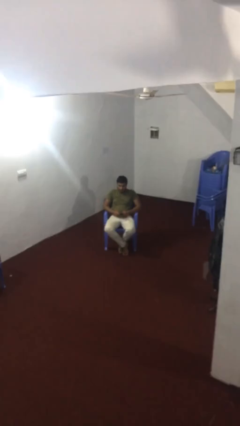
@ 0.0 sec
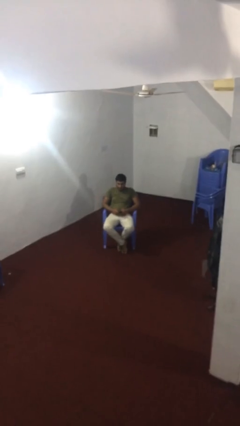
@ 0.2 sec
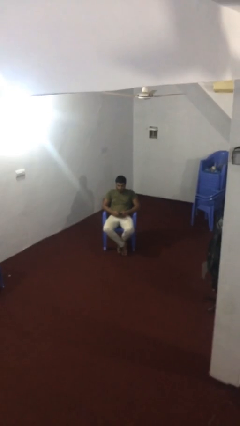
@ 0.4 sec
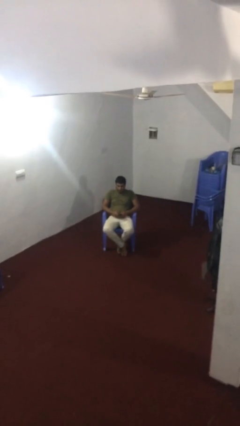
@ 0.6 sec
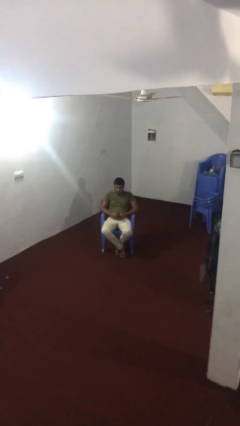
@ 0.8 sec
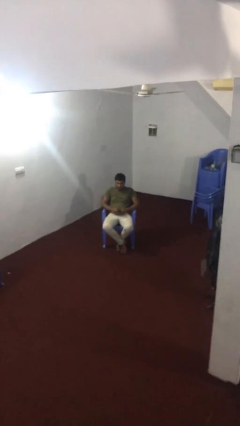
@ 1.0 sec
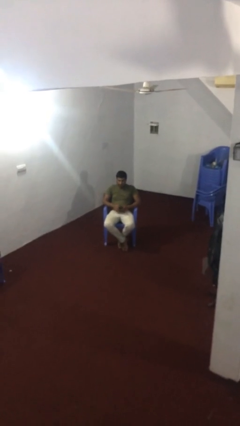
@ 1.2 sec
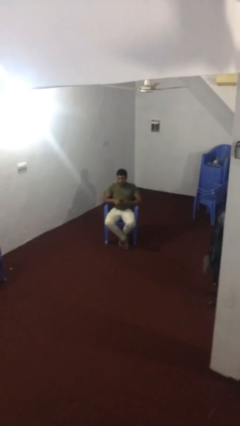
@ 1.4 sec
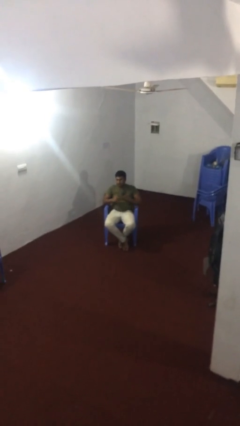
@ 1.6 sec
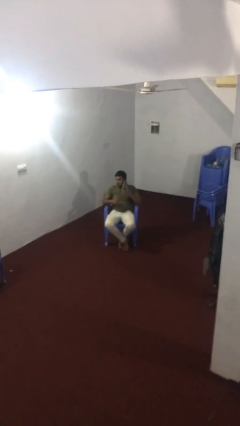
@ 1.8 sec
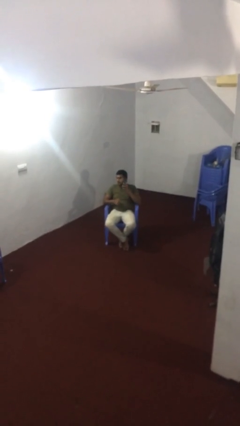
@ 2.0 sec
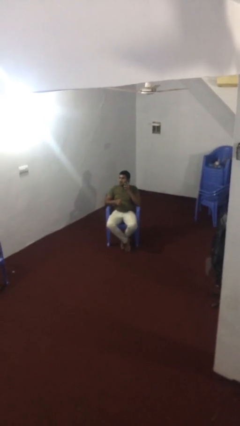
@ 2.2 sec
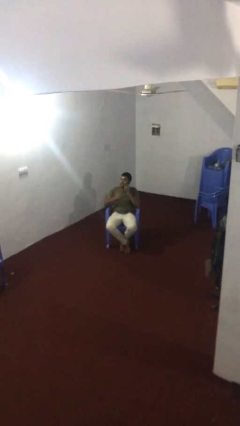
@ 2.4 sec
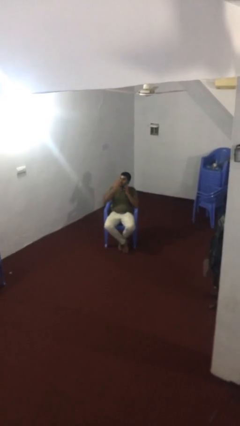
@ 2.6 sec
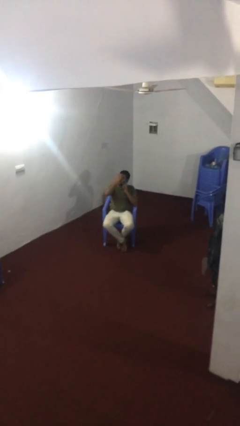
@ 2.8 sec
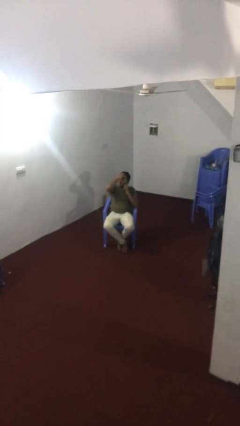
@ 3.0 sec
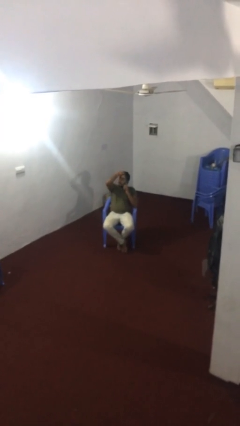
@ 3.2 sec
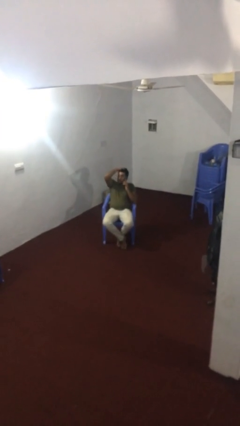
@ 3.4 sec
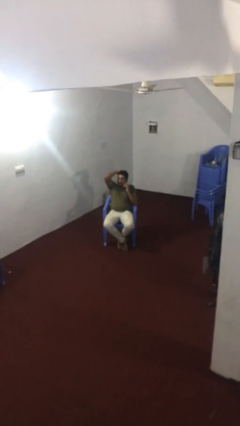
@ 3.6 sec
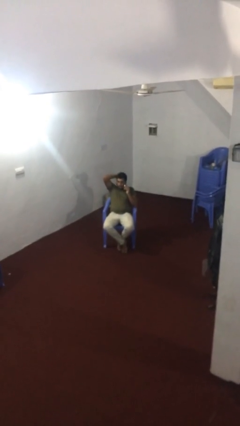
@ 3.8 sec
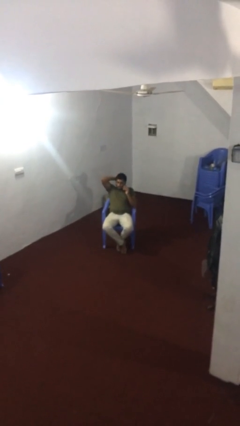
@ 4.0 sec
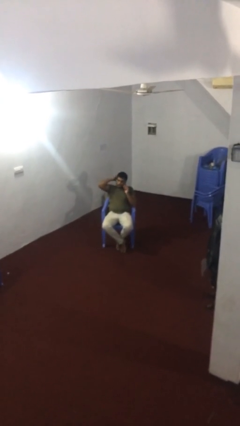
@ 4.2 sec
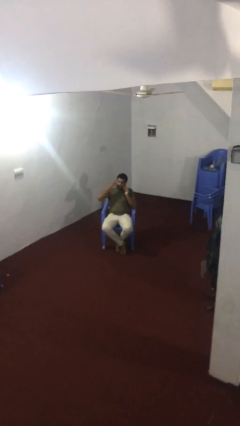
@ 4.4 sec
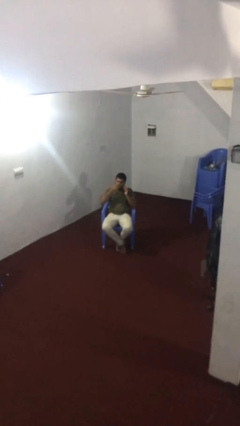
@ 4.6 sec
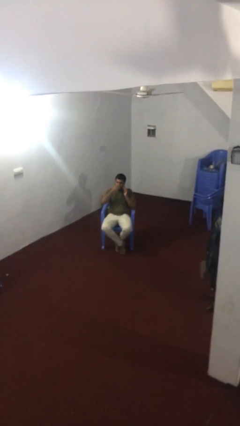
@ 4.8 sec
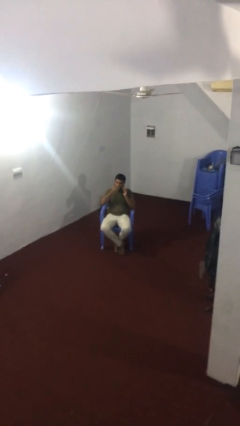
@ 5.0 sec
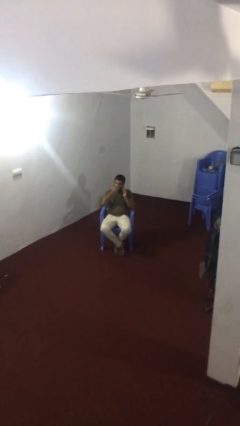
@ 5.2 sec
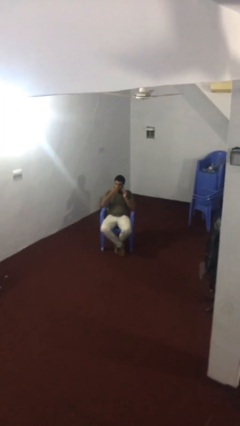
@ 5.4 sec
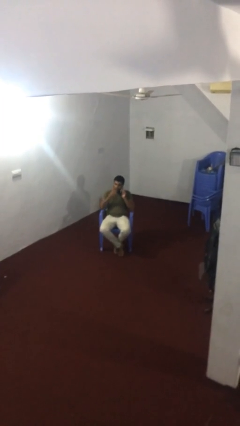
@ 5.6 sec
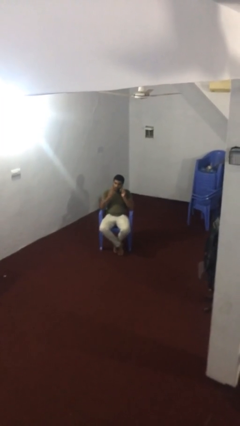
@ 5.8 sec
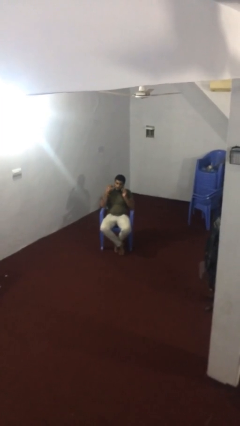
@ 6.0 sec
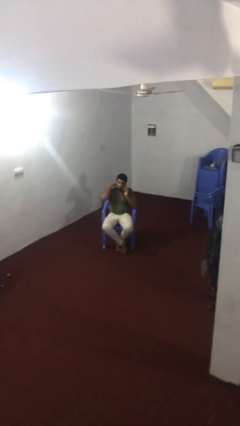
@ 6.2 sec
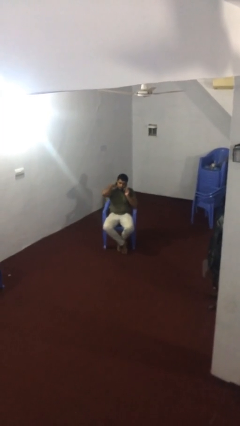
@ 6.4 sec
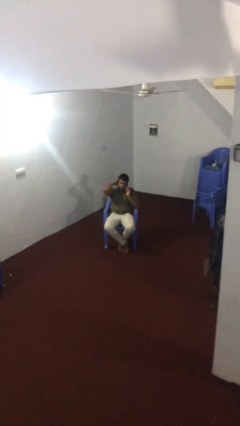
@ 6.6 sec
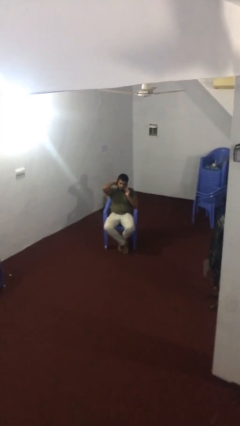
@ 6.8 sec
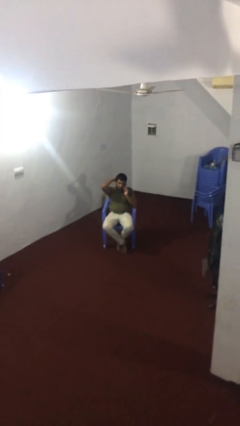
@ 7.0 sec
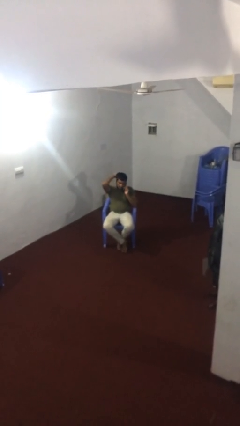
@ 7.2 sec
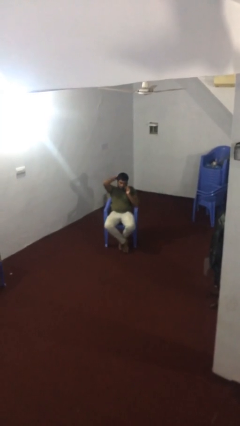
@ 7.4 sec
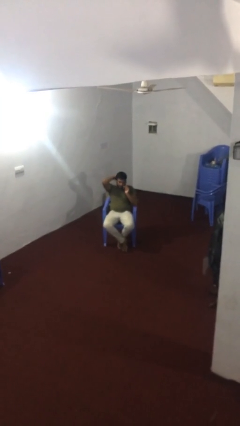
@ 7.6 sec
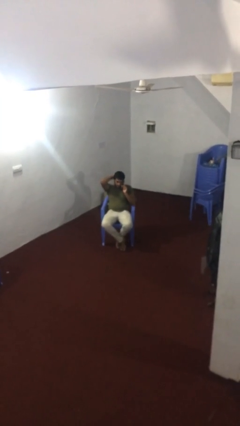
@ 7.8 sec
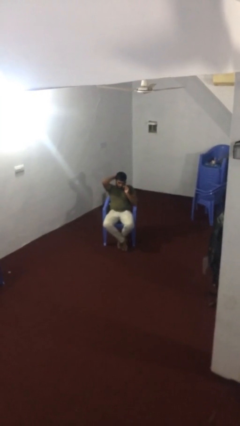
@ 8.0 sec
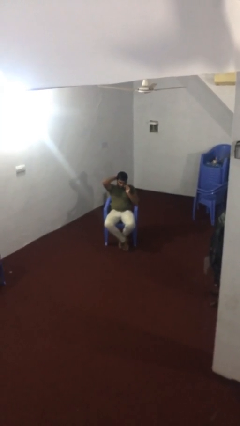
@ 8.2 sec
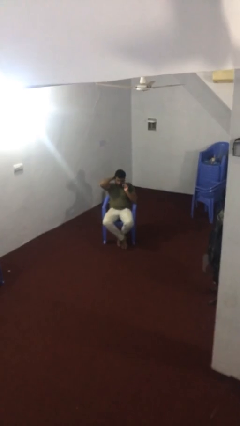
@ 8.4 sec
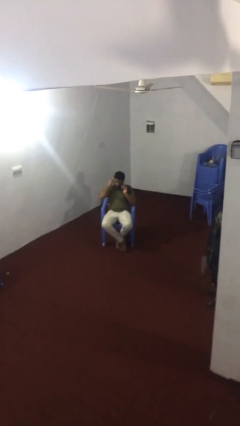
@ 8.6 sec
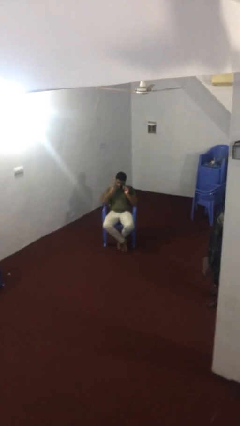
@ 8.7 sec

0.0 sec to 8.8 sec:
person talks on phone

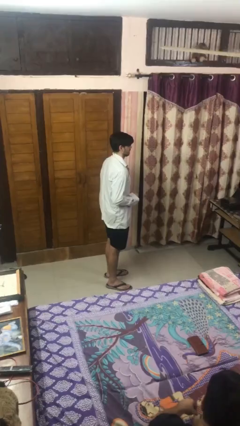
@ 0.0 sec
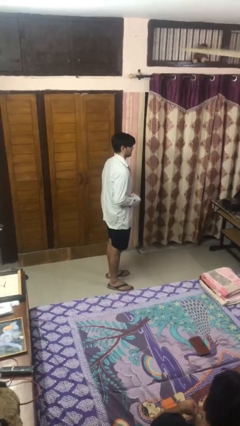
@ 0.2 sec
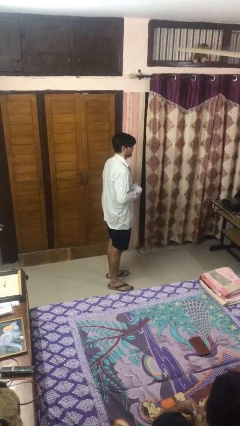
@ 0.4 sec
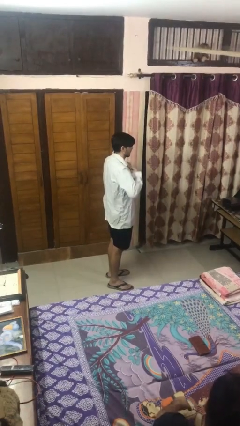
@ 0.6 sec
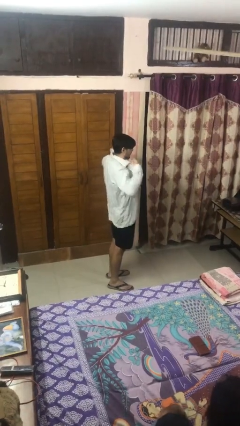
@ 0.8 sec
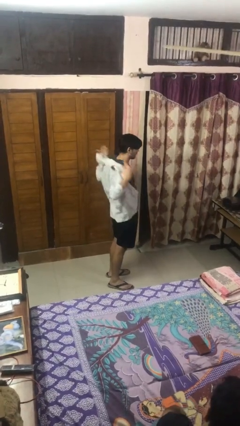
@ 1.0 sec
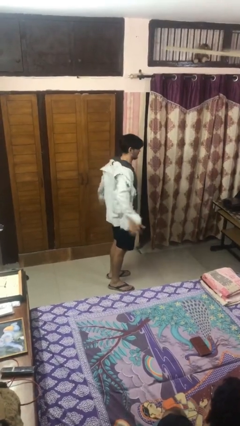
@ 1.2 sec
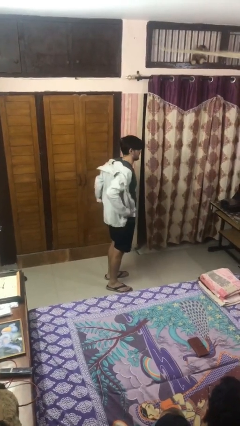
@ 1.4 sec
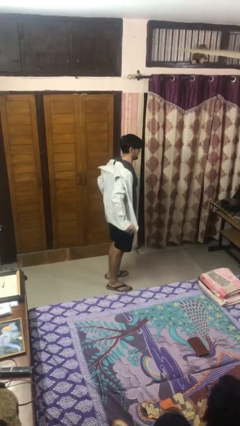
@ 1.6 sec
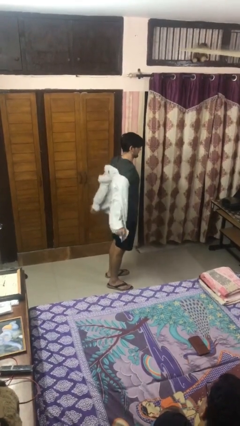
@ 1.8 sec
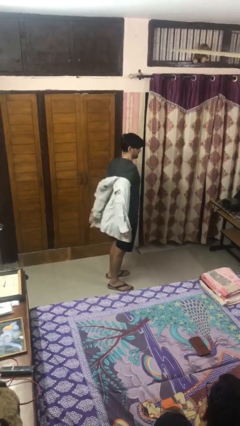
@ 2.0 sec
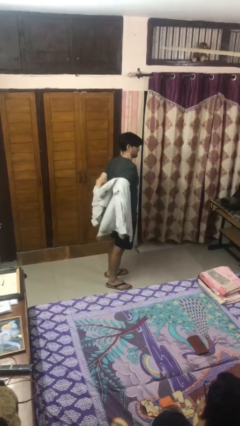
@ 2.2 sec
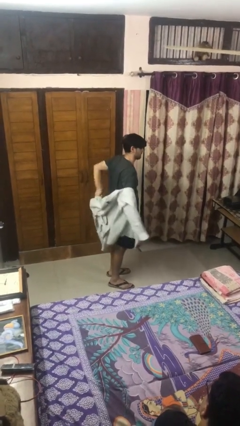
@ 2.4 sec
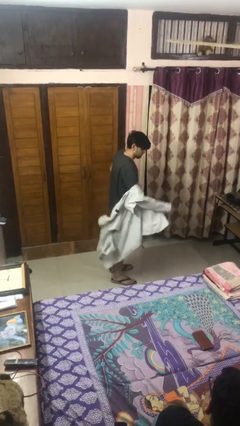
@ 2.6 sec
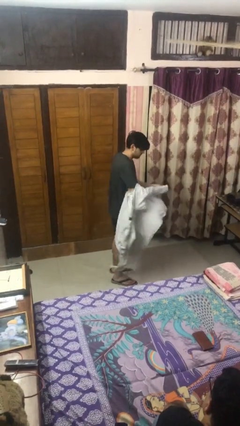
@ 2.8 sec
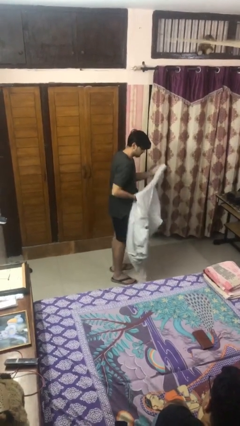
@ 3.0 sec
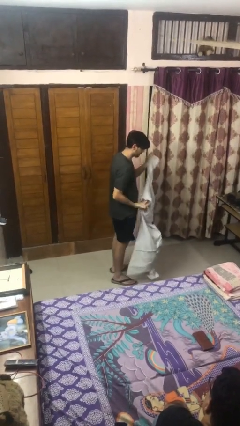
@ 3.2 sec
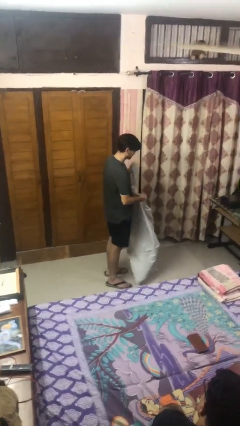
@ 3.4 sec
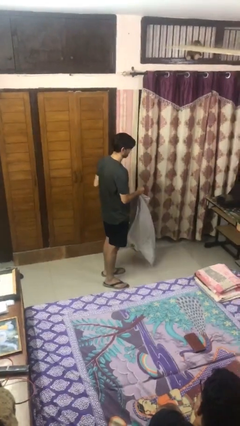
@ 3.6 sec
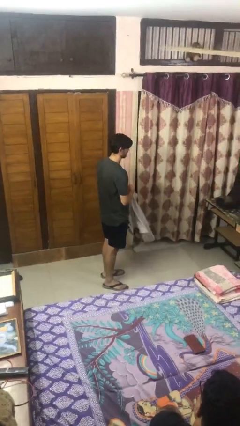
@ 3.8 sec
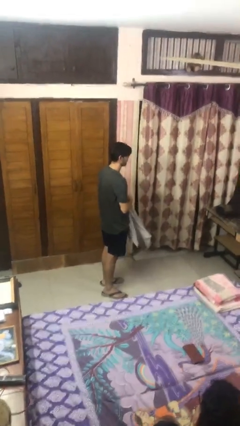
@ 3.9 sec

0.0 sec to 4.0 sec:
person takes off shirt

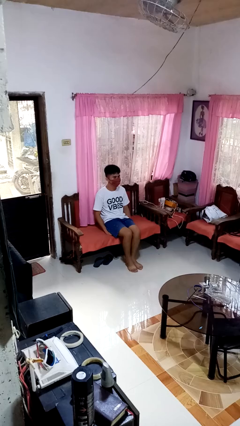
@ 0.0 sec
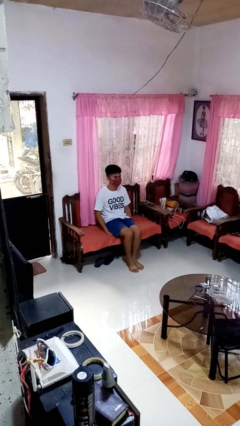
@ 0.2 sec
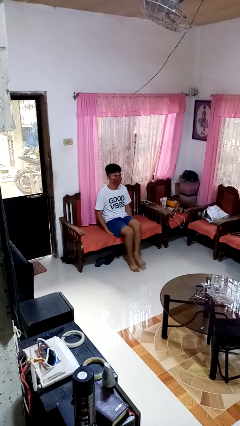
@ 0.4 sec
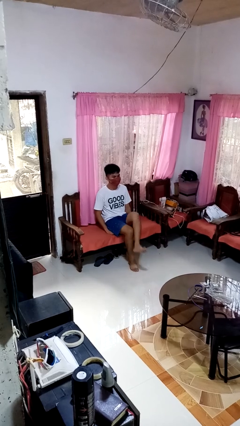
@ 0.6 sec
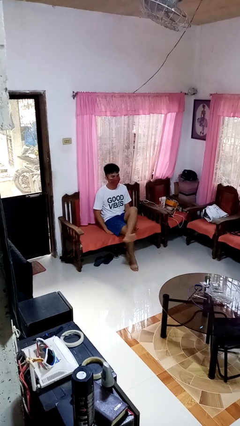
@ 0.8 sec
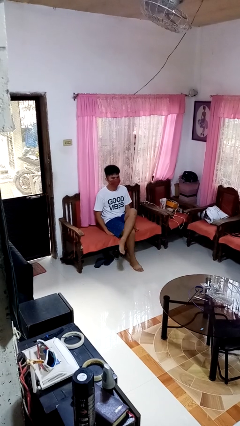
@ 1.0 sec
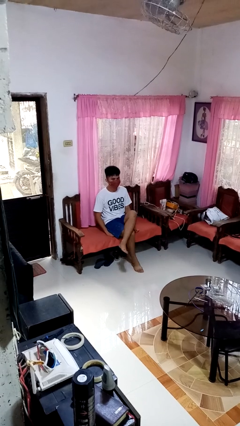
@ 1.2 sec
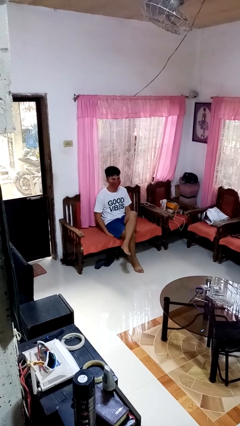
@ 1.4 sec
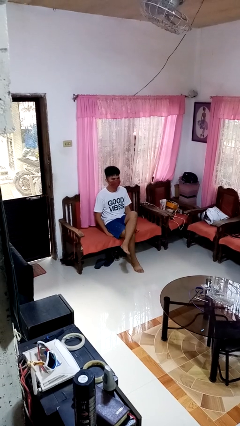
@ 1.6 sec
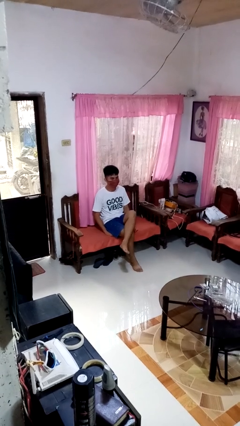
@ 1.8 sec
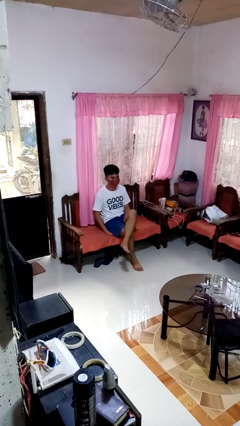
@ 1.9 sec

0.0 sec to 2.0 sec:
person crosses legs

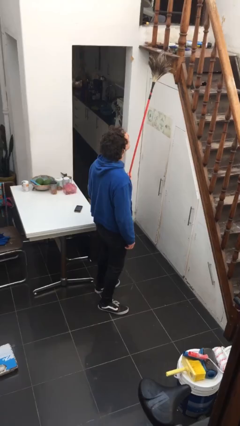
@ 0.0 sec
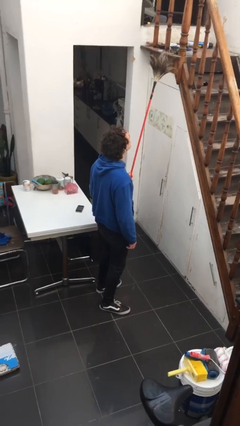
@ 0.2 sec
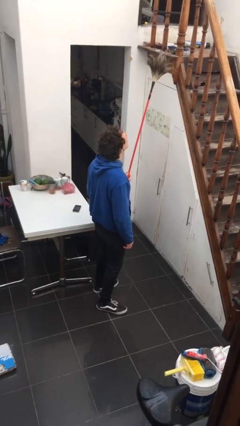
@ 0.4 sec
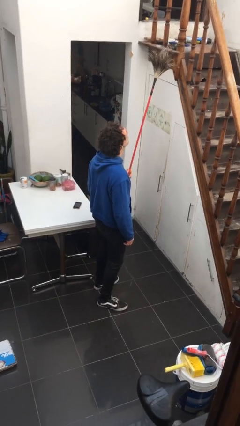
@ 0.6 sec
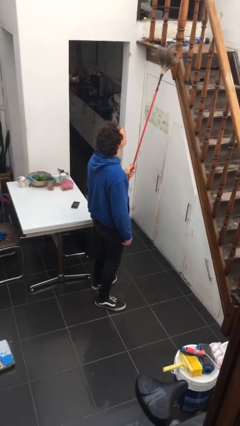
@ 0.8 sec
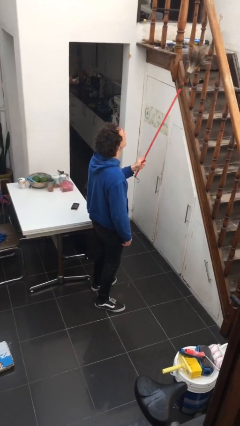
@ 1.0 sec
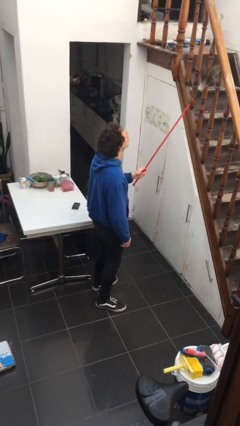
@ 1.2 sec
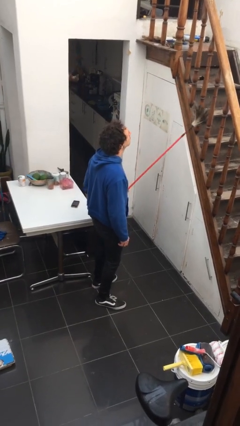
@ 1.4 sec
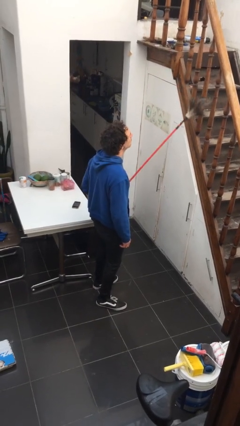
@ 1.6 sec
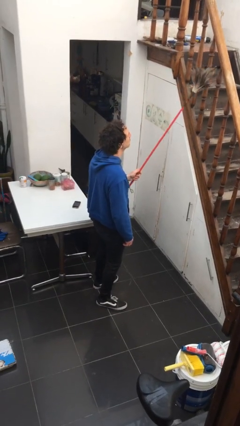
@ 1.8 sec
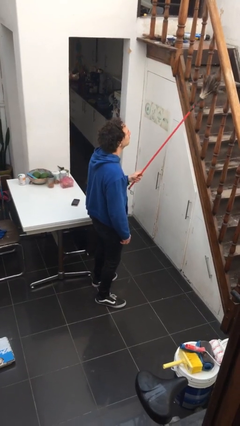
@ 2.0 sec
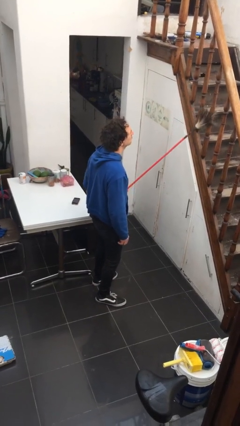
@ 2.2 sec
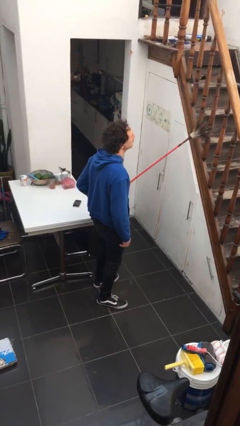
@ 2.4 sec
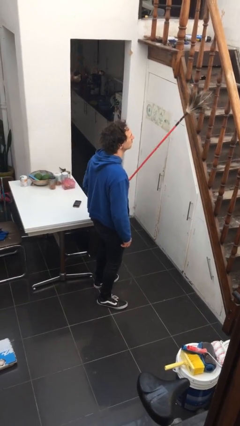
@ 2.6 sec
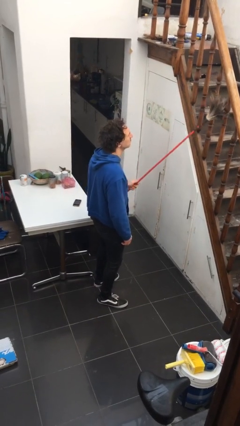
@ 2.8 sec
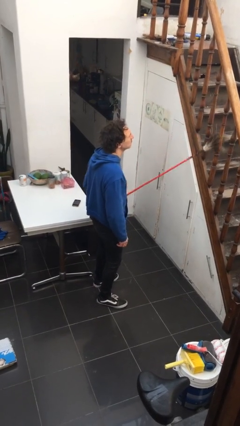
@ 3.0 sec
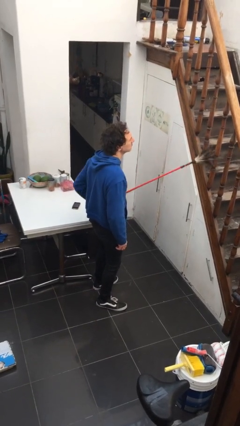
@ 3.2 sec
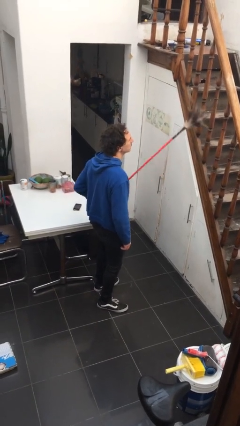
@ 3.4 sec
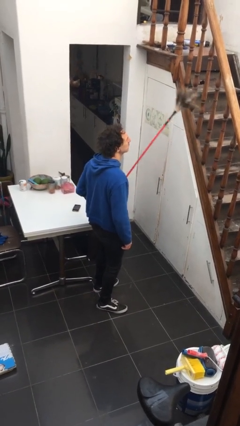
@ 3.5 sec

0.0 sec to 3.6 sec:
person dusts furniture
